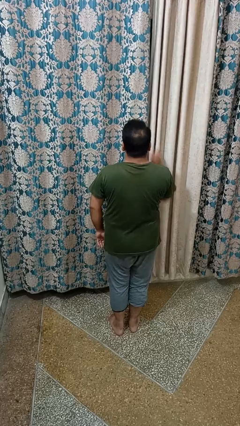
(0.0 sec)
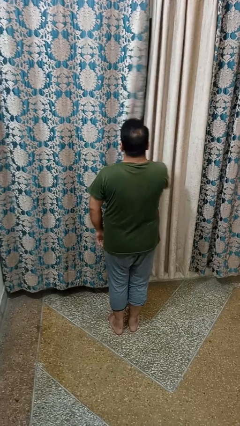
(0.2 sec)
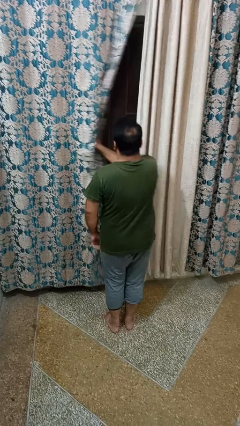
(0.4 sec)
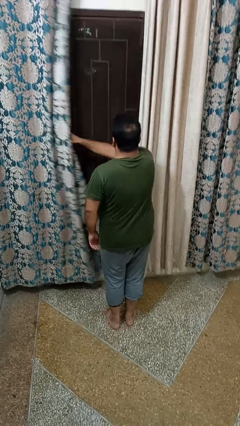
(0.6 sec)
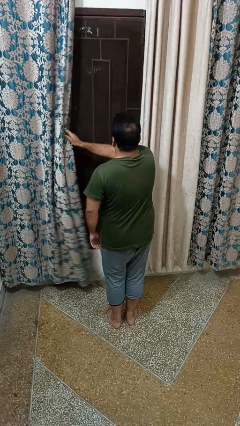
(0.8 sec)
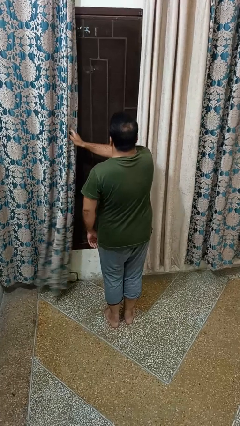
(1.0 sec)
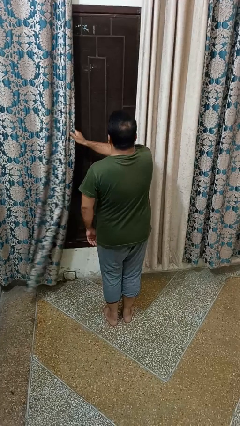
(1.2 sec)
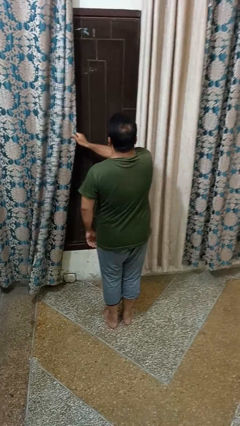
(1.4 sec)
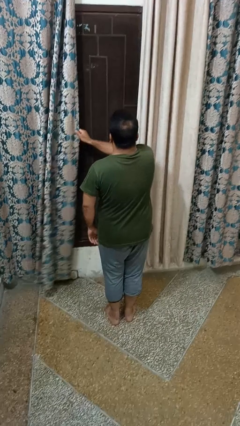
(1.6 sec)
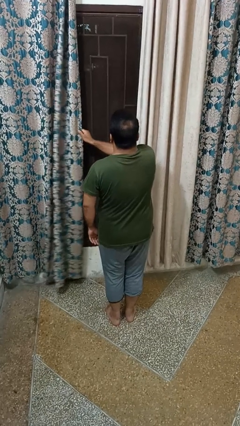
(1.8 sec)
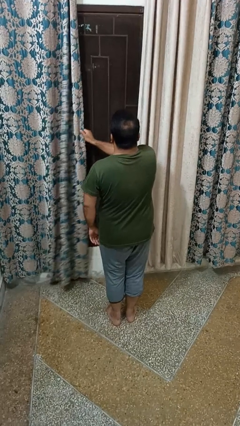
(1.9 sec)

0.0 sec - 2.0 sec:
person opens curtains

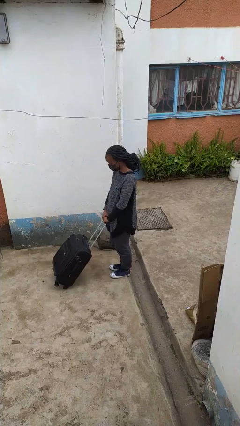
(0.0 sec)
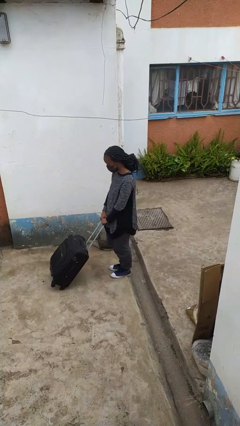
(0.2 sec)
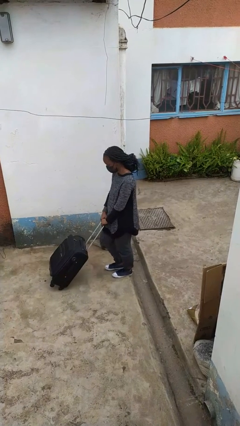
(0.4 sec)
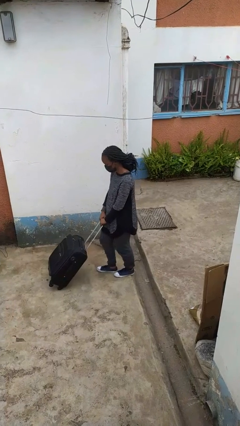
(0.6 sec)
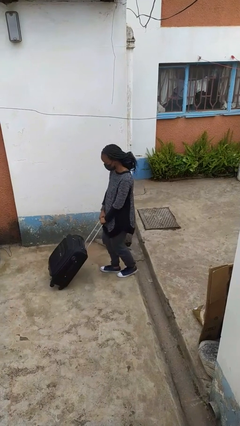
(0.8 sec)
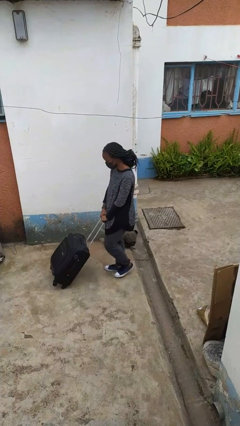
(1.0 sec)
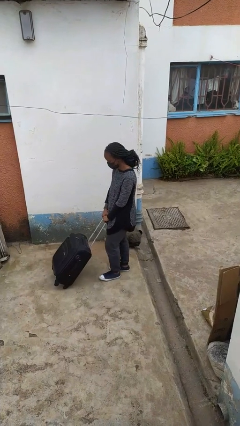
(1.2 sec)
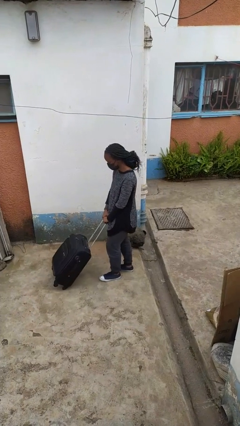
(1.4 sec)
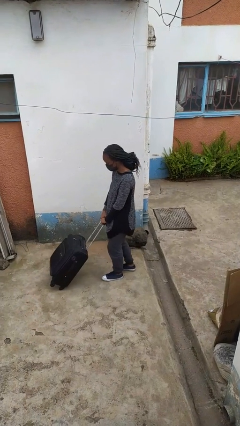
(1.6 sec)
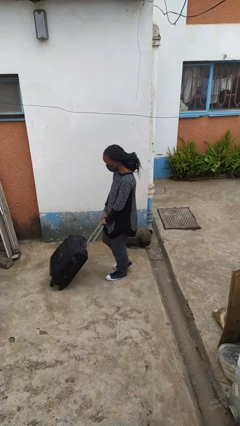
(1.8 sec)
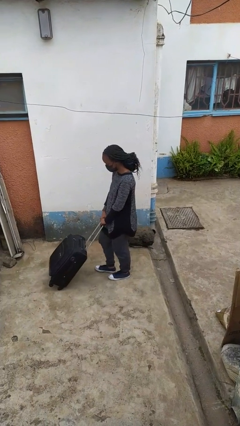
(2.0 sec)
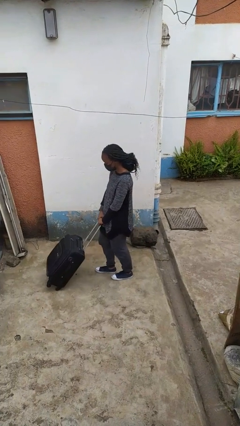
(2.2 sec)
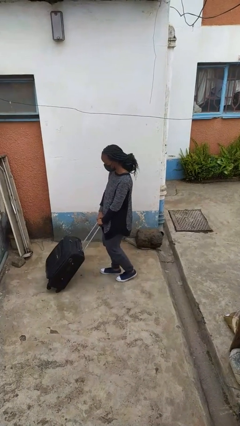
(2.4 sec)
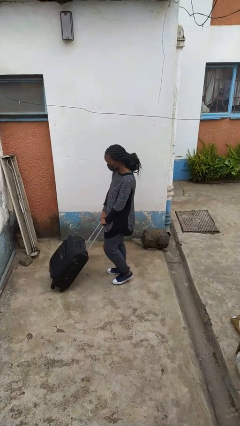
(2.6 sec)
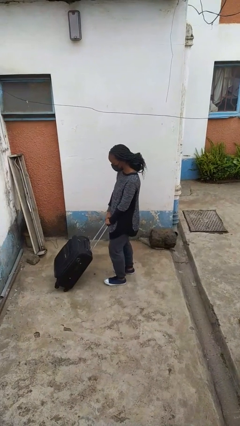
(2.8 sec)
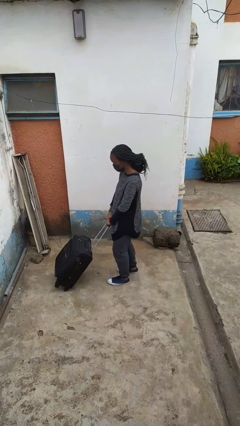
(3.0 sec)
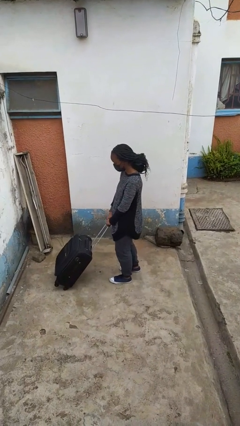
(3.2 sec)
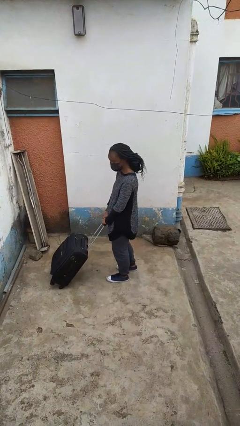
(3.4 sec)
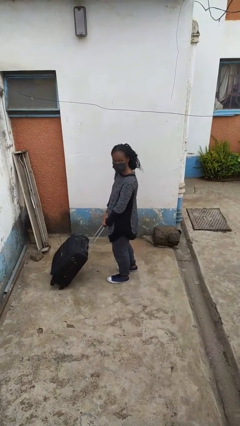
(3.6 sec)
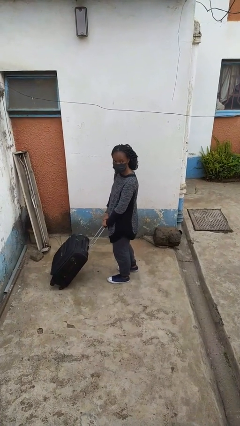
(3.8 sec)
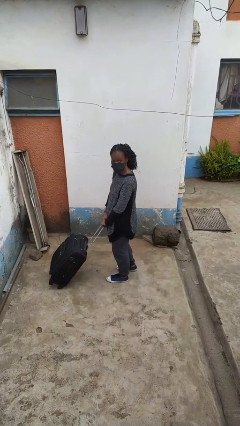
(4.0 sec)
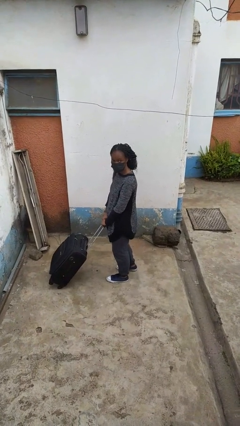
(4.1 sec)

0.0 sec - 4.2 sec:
person pushes wheeled cart

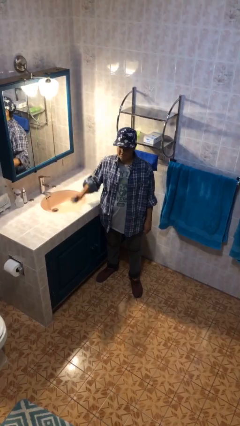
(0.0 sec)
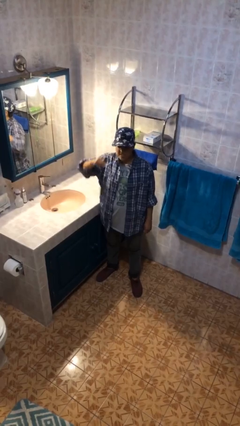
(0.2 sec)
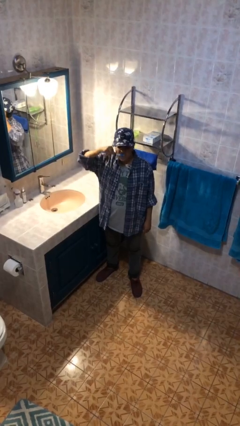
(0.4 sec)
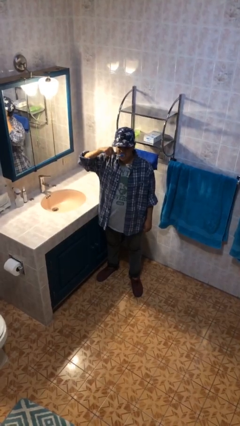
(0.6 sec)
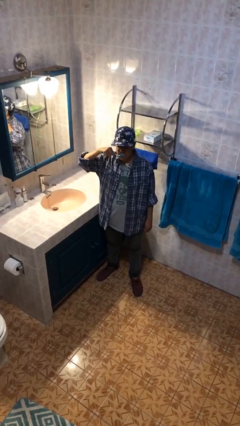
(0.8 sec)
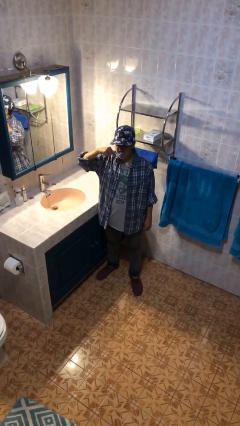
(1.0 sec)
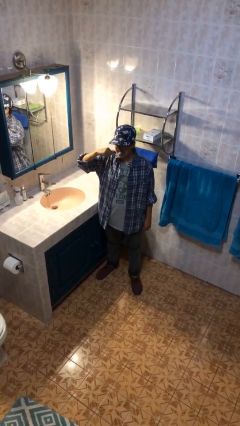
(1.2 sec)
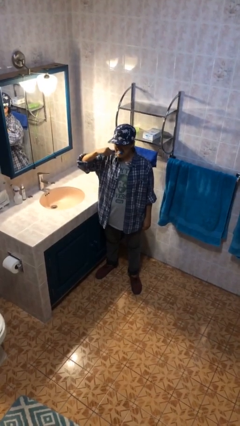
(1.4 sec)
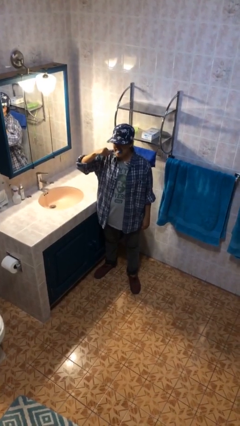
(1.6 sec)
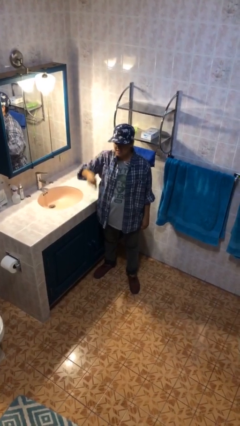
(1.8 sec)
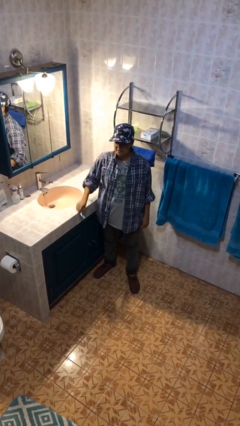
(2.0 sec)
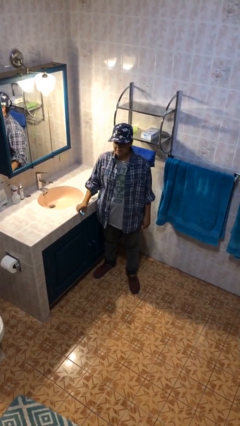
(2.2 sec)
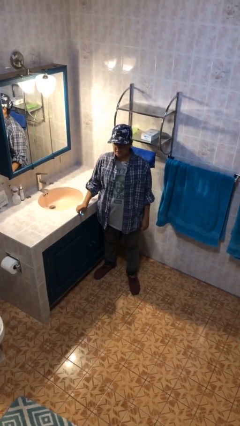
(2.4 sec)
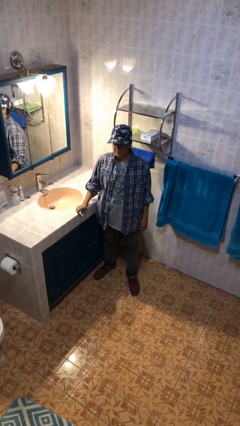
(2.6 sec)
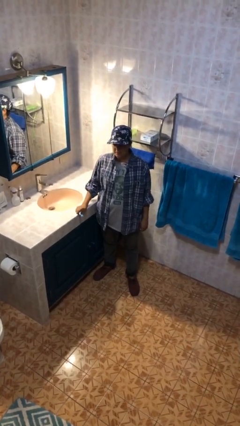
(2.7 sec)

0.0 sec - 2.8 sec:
person brushes teeth

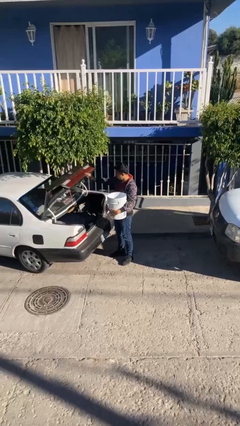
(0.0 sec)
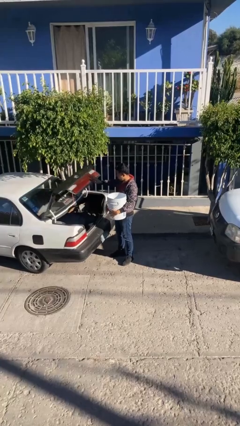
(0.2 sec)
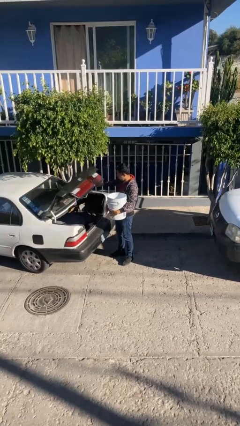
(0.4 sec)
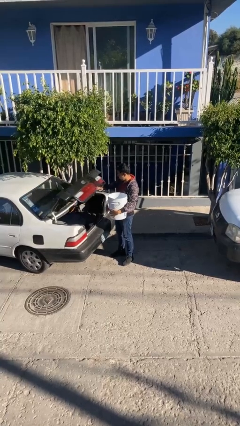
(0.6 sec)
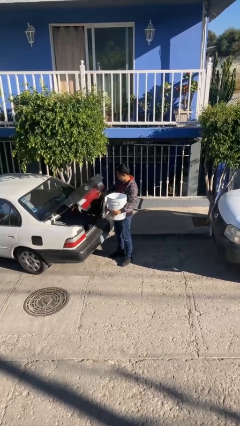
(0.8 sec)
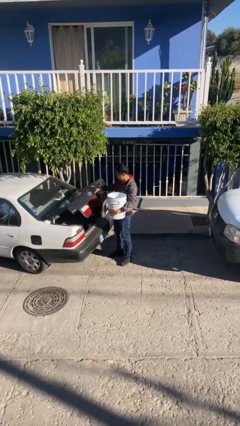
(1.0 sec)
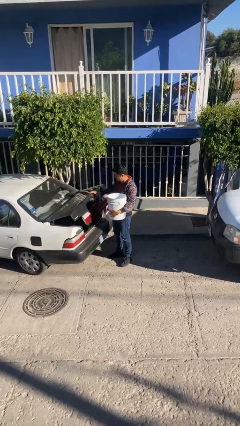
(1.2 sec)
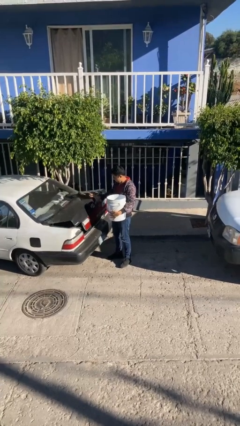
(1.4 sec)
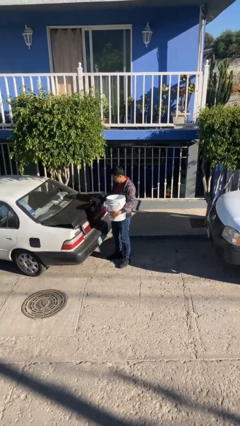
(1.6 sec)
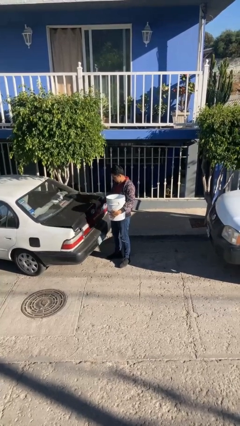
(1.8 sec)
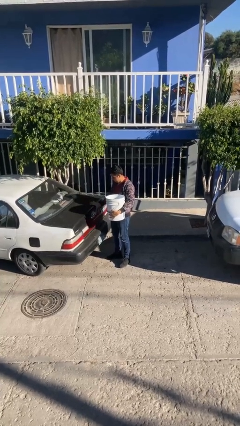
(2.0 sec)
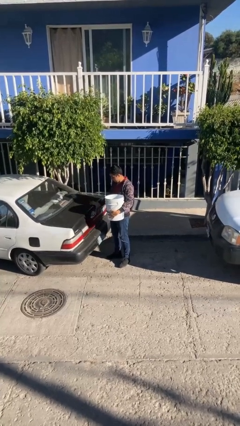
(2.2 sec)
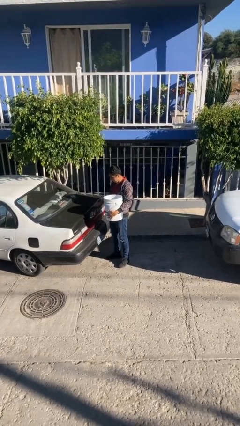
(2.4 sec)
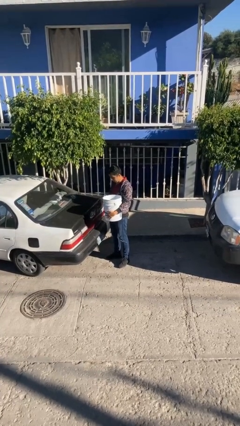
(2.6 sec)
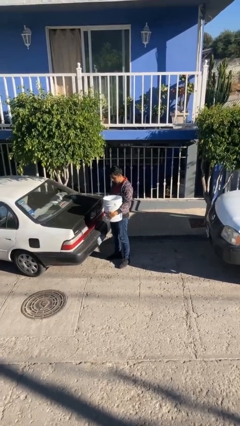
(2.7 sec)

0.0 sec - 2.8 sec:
person closes car trunk

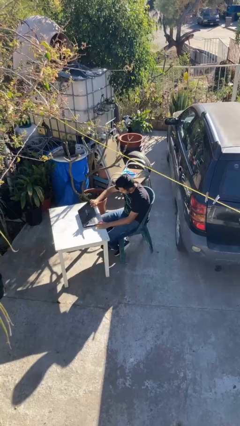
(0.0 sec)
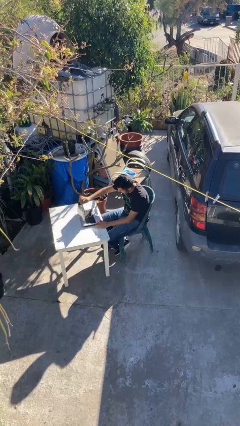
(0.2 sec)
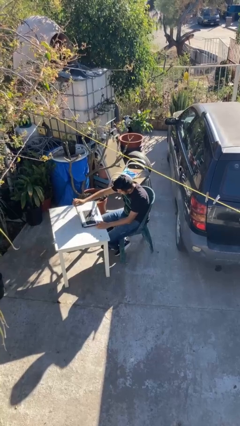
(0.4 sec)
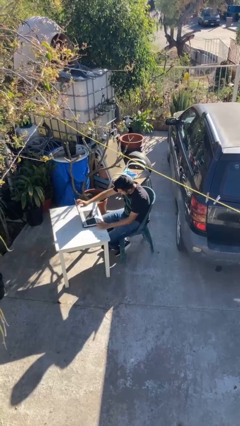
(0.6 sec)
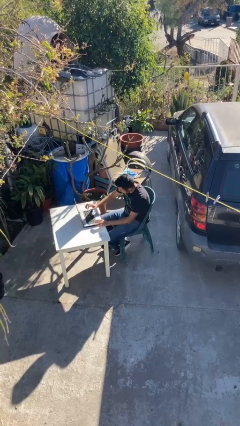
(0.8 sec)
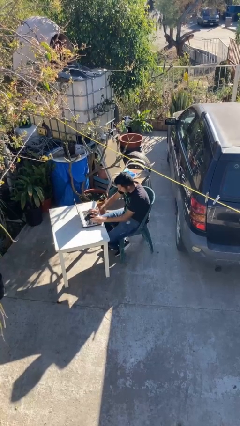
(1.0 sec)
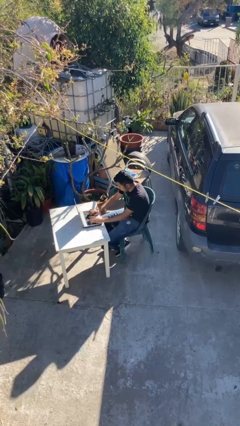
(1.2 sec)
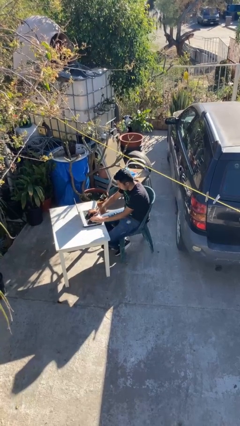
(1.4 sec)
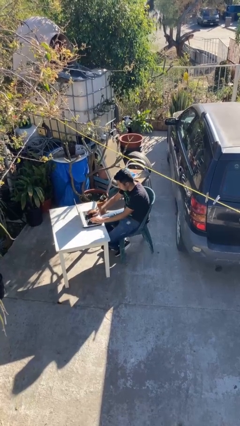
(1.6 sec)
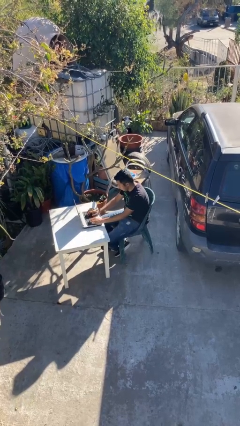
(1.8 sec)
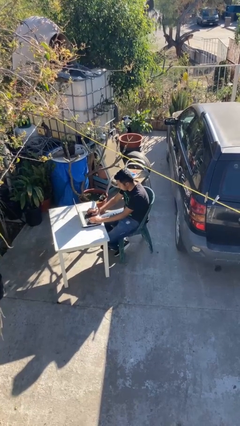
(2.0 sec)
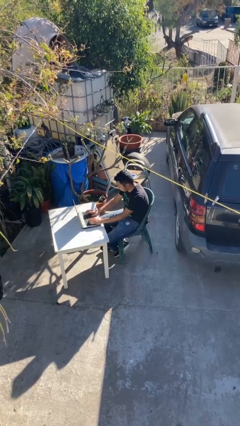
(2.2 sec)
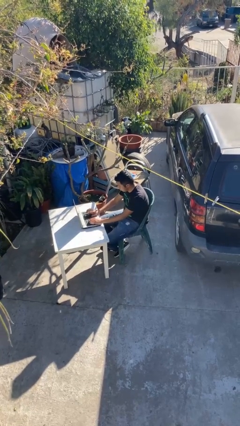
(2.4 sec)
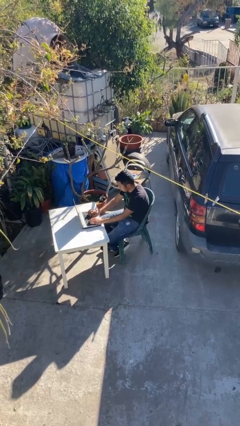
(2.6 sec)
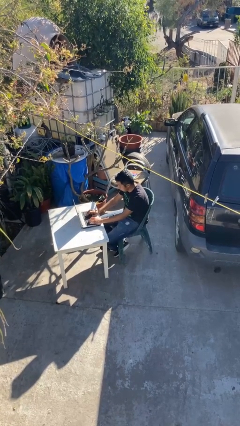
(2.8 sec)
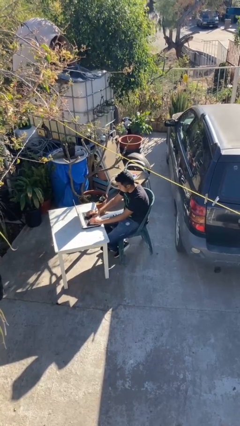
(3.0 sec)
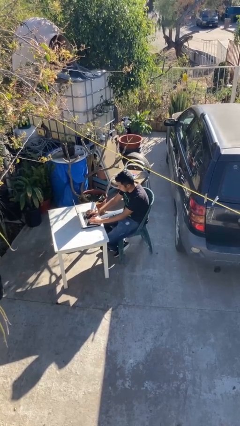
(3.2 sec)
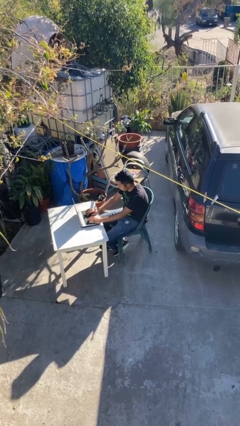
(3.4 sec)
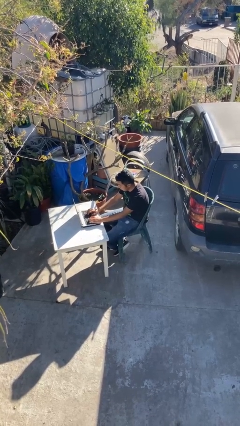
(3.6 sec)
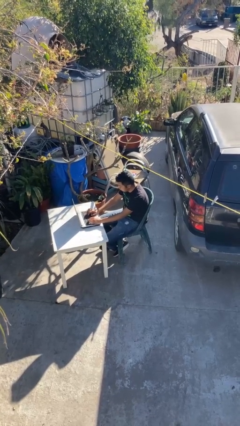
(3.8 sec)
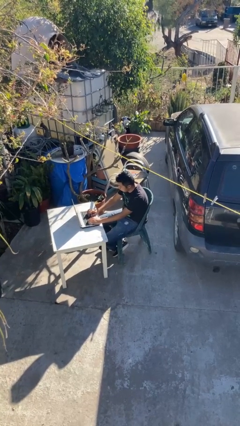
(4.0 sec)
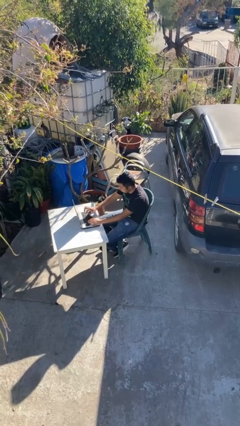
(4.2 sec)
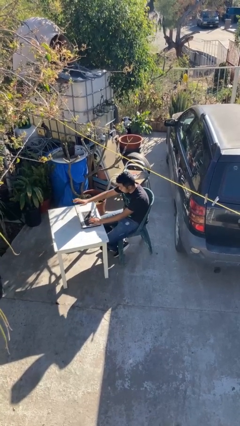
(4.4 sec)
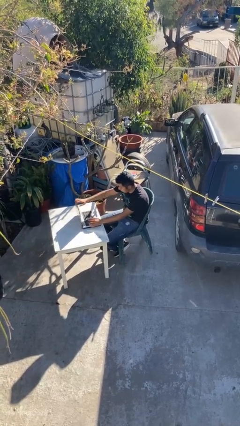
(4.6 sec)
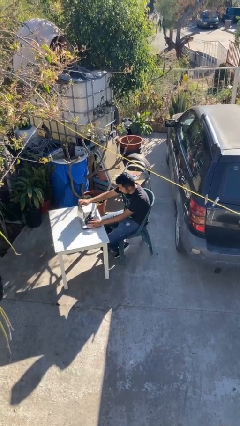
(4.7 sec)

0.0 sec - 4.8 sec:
person interacts with laptop

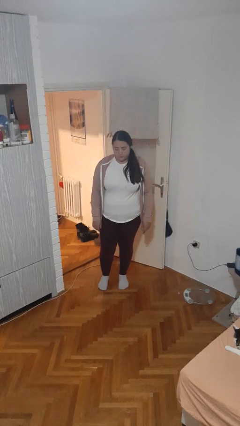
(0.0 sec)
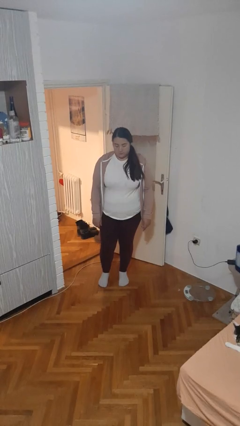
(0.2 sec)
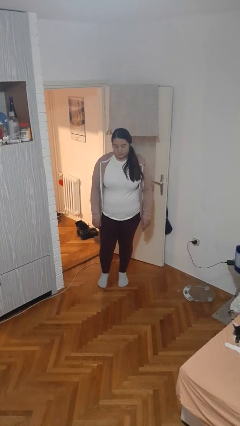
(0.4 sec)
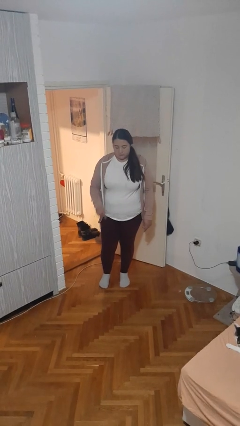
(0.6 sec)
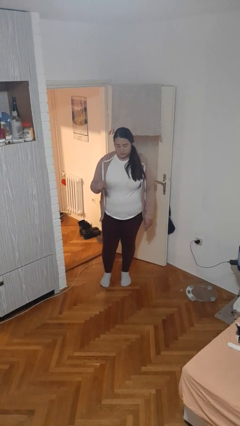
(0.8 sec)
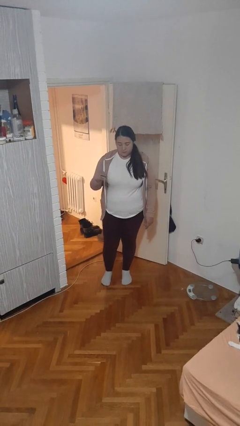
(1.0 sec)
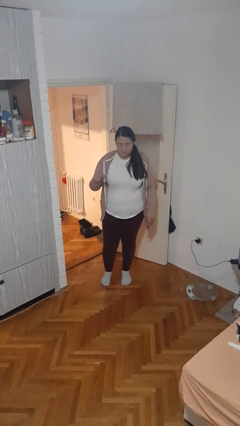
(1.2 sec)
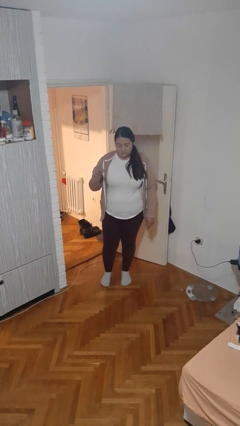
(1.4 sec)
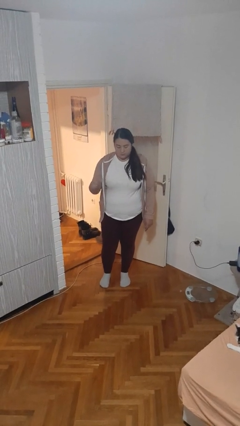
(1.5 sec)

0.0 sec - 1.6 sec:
person snaps fingers
